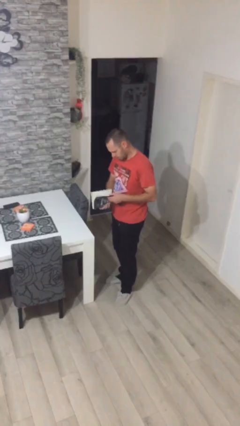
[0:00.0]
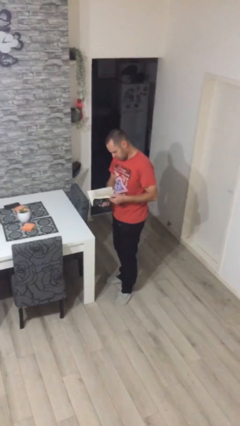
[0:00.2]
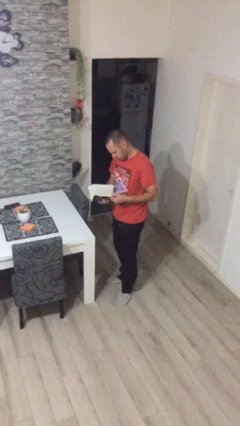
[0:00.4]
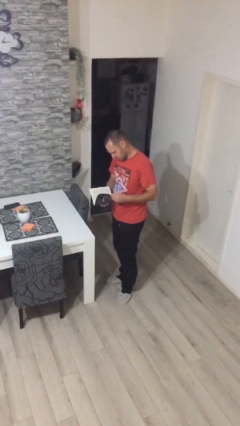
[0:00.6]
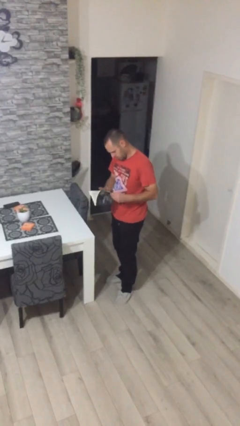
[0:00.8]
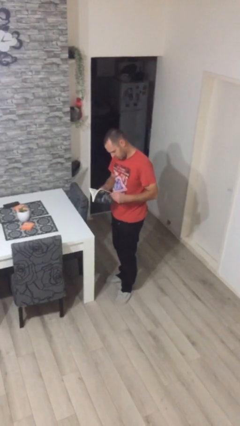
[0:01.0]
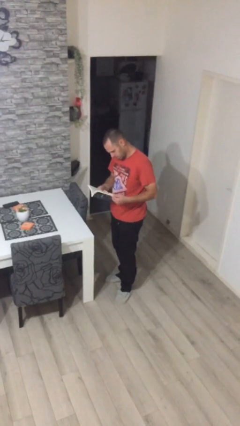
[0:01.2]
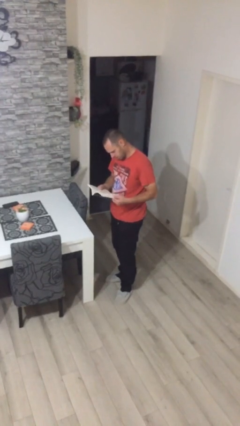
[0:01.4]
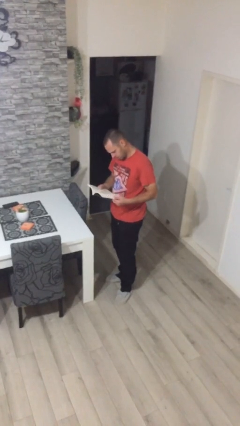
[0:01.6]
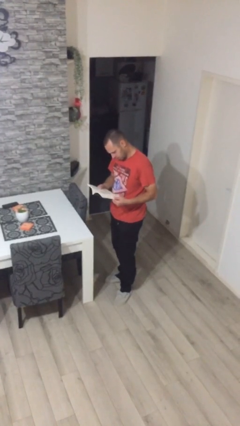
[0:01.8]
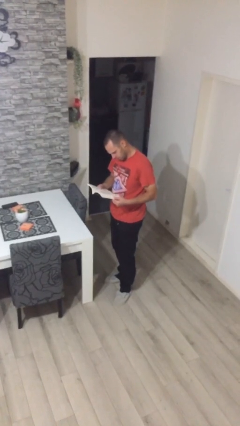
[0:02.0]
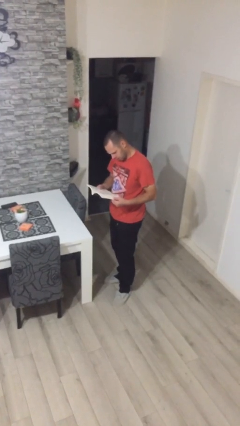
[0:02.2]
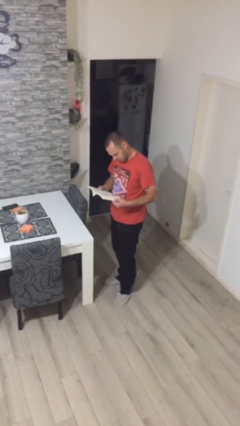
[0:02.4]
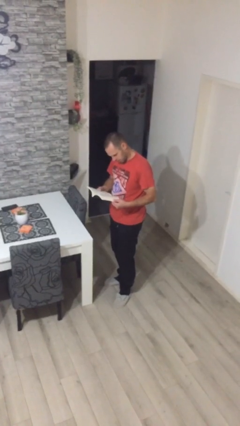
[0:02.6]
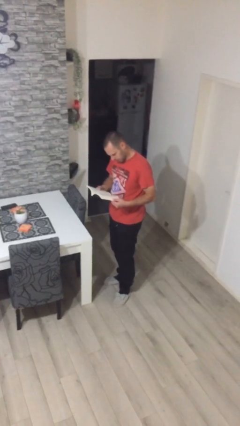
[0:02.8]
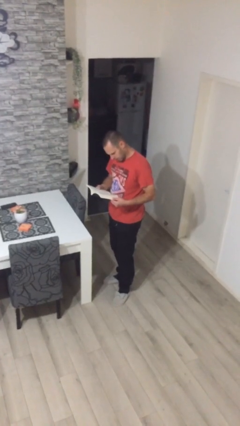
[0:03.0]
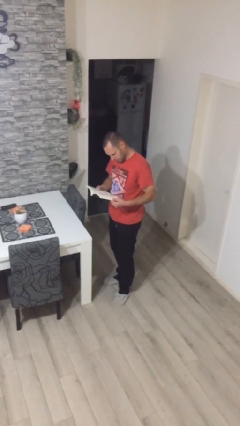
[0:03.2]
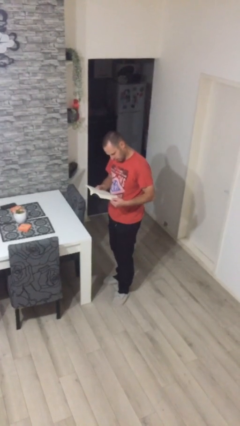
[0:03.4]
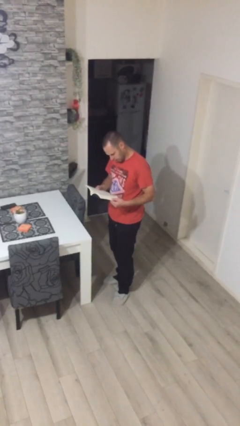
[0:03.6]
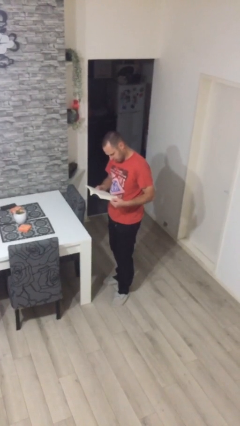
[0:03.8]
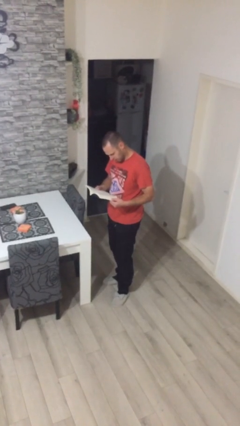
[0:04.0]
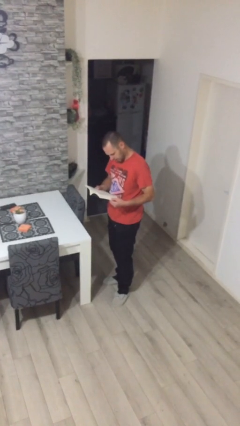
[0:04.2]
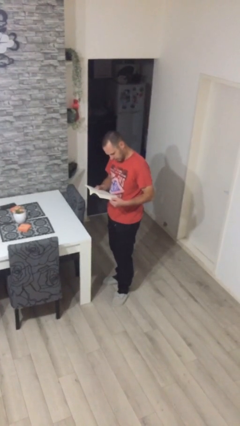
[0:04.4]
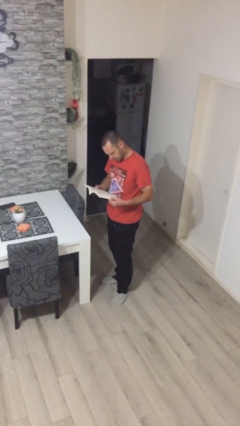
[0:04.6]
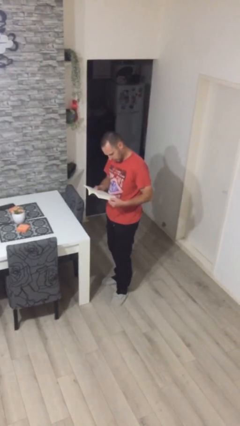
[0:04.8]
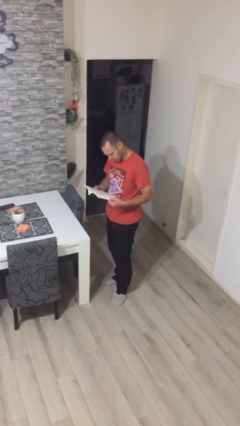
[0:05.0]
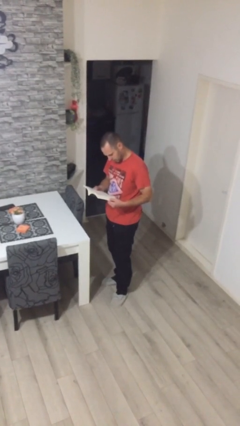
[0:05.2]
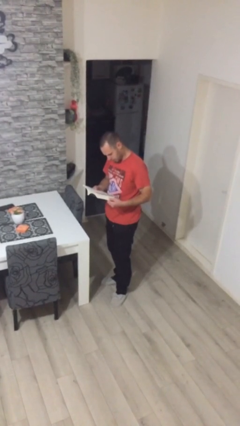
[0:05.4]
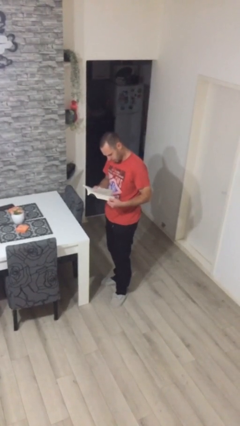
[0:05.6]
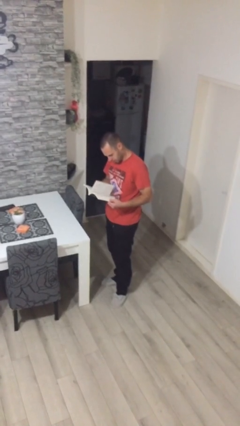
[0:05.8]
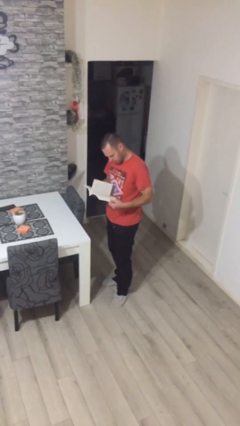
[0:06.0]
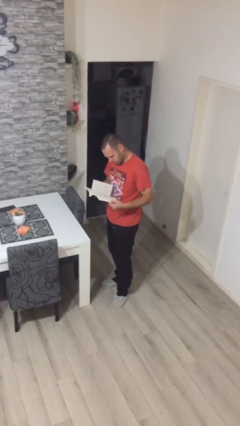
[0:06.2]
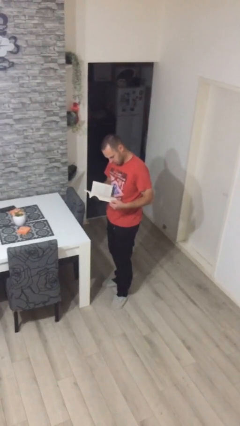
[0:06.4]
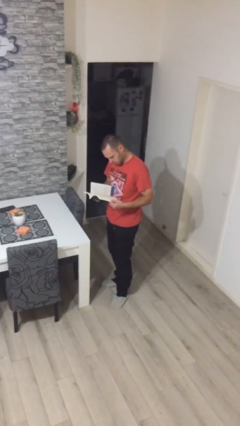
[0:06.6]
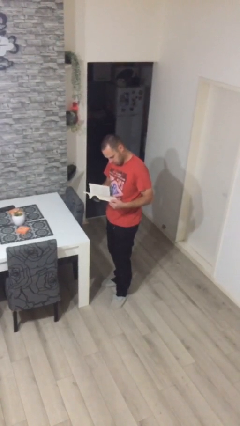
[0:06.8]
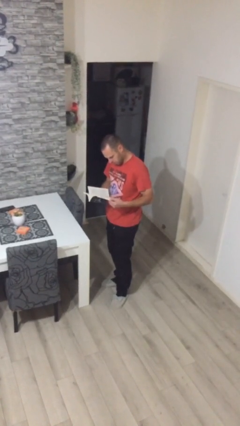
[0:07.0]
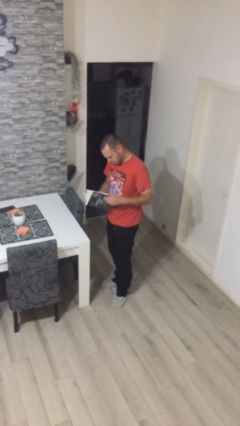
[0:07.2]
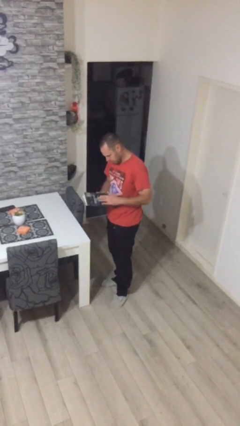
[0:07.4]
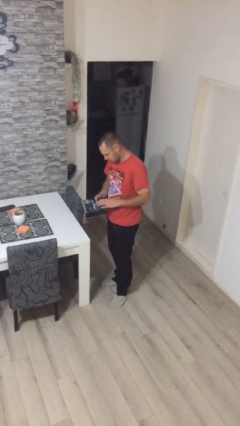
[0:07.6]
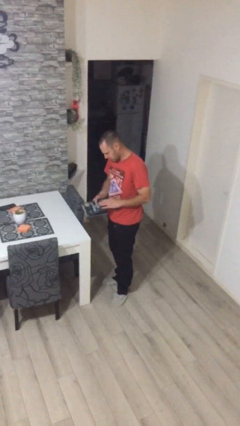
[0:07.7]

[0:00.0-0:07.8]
person reads document

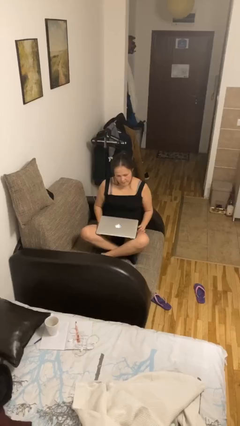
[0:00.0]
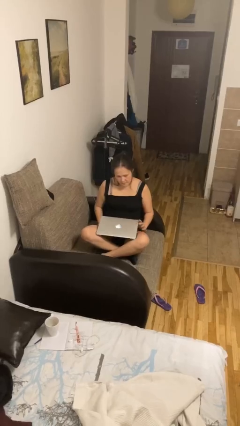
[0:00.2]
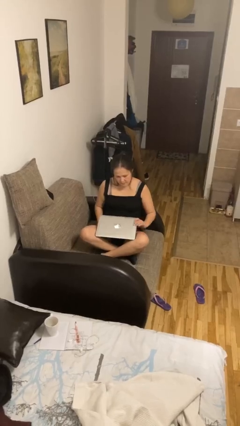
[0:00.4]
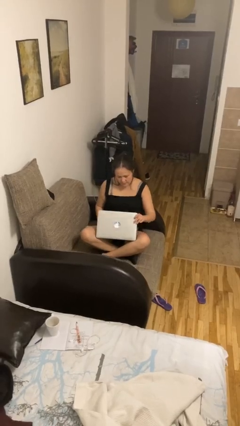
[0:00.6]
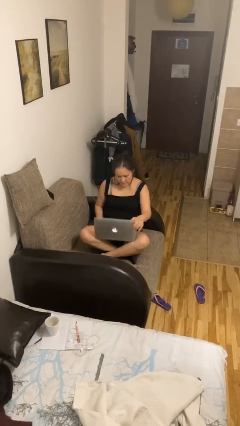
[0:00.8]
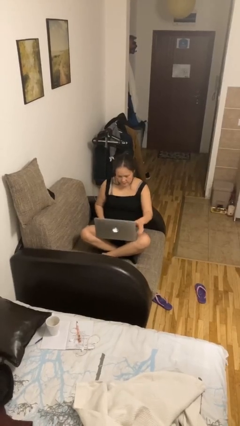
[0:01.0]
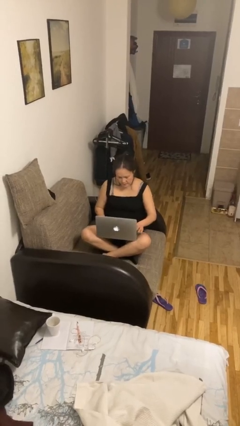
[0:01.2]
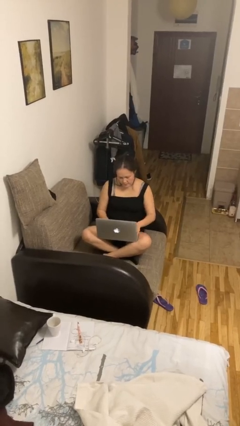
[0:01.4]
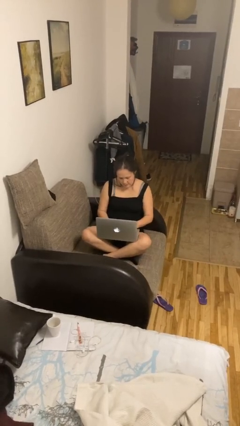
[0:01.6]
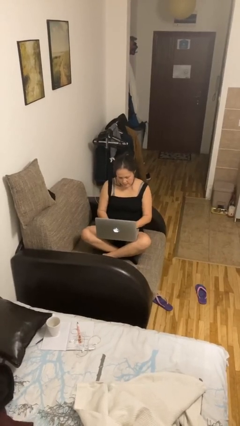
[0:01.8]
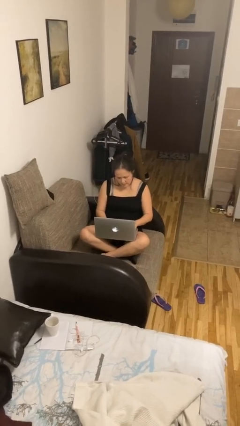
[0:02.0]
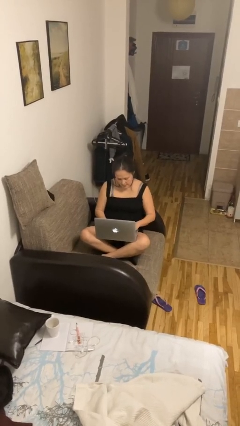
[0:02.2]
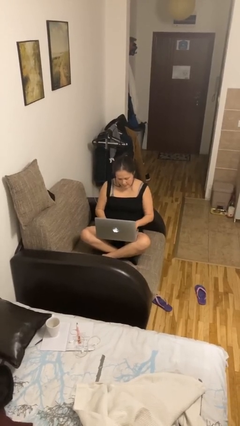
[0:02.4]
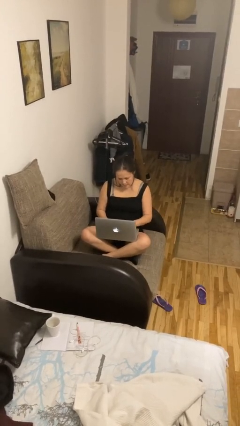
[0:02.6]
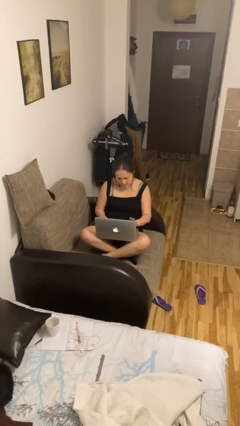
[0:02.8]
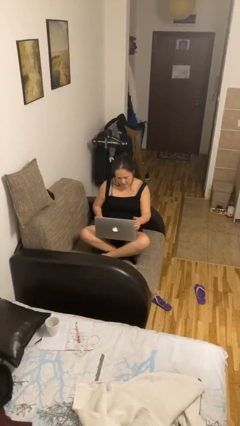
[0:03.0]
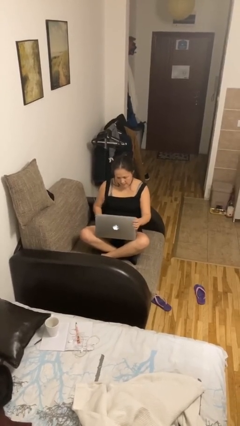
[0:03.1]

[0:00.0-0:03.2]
person interacts with laptop

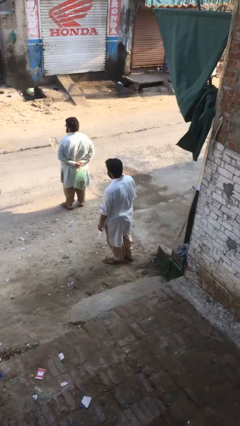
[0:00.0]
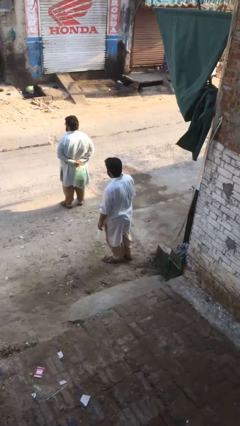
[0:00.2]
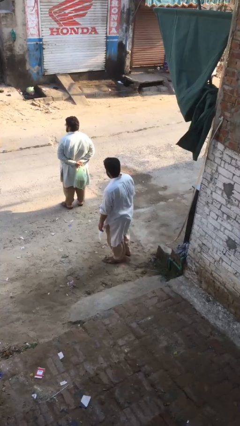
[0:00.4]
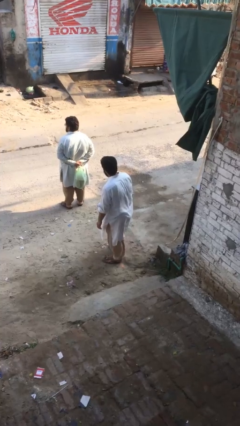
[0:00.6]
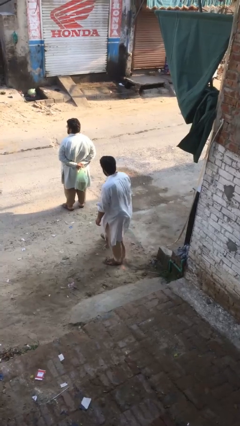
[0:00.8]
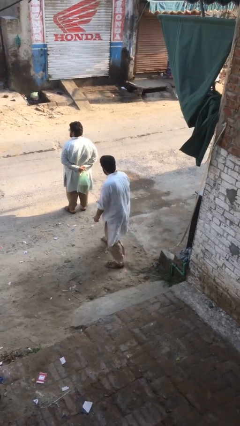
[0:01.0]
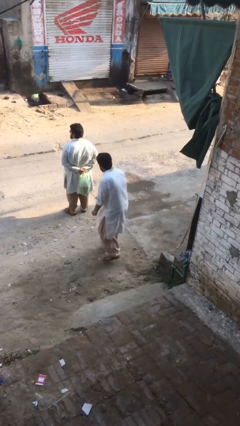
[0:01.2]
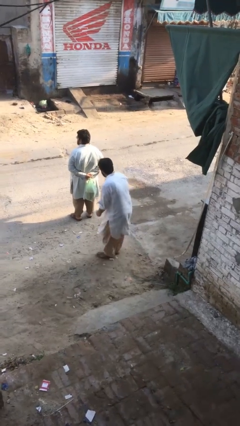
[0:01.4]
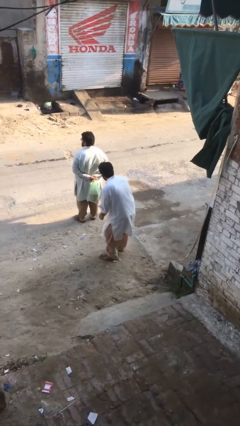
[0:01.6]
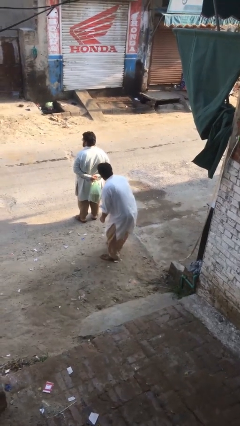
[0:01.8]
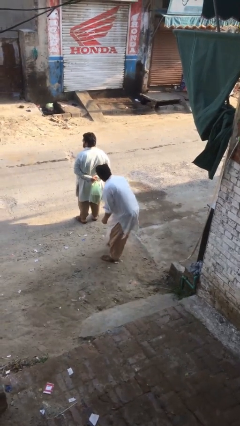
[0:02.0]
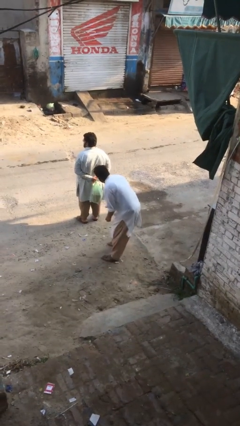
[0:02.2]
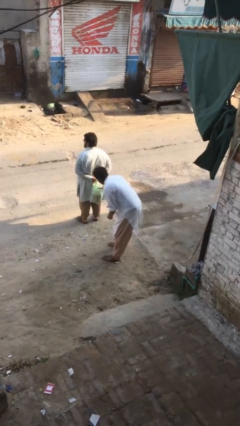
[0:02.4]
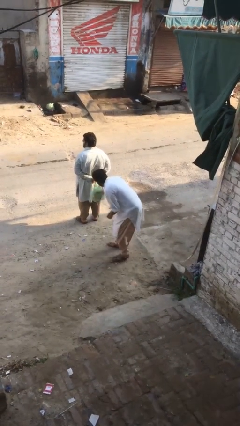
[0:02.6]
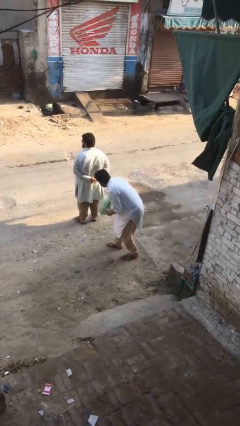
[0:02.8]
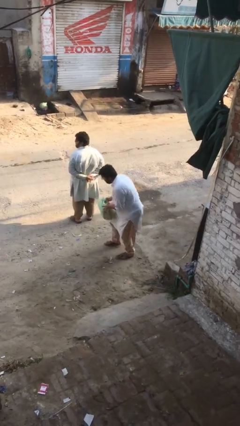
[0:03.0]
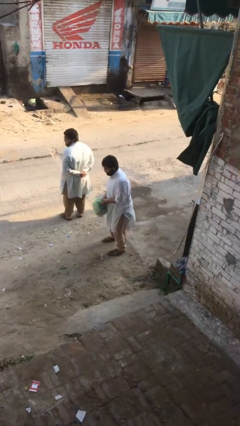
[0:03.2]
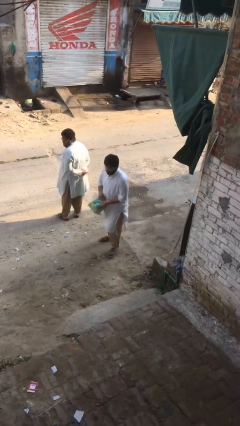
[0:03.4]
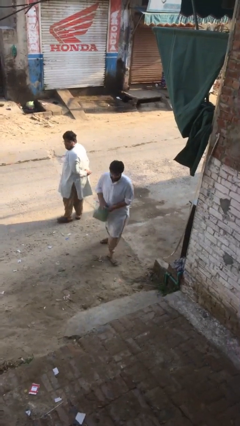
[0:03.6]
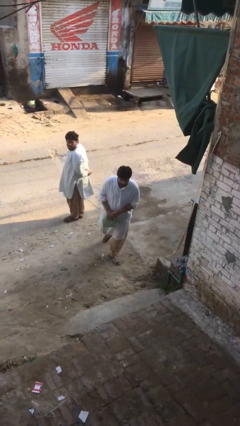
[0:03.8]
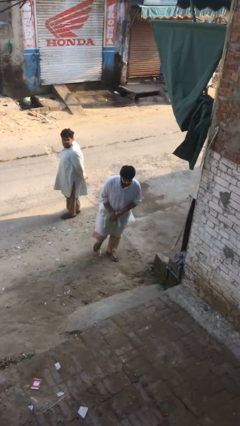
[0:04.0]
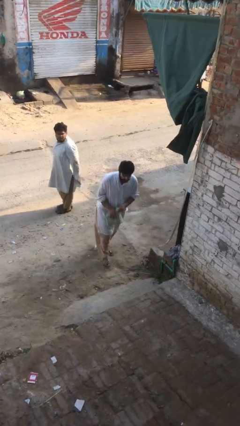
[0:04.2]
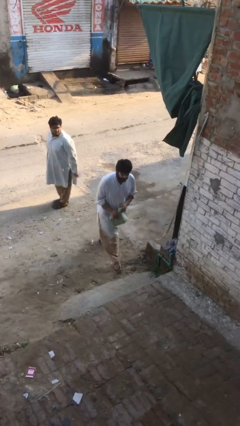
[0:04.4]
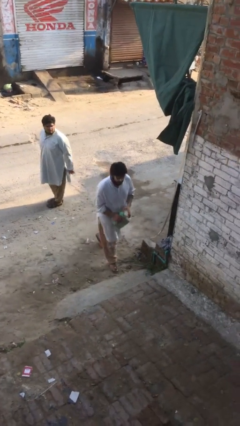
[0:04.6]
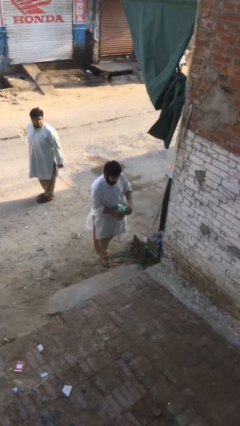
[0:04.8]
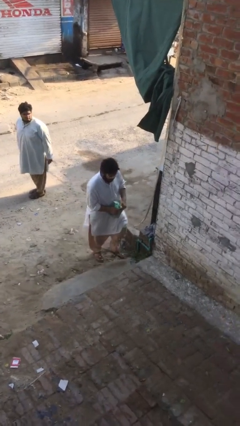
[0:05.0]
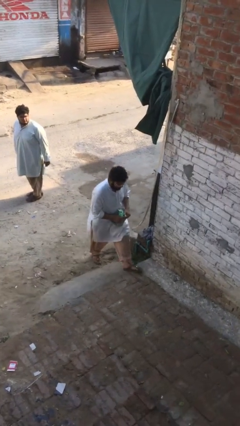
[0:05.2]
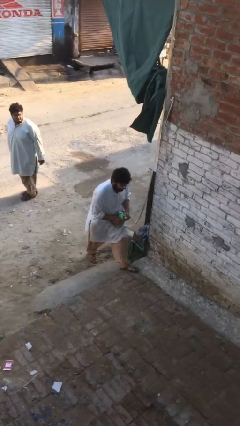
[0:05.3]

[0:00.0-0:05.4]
person steals object from person

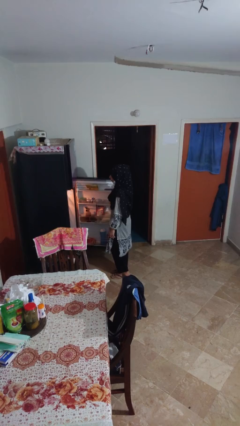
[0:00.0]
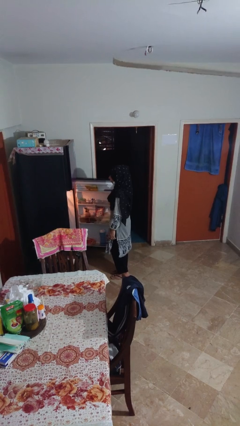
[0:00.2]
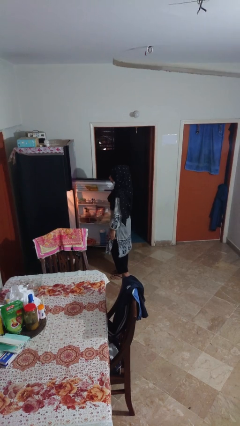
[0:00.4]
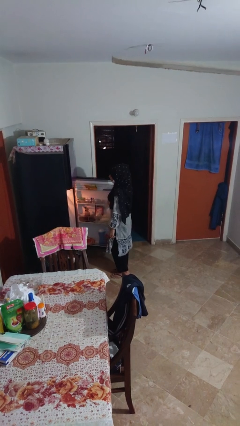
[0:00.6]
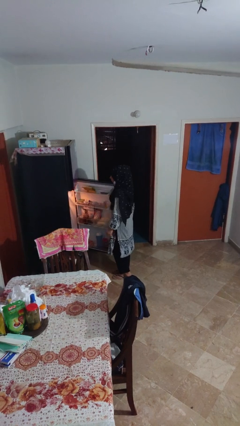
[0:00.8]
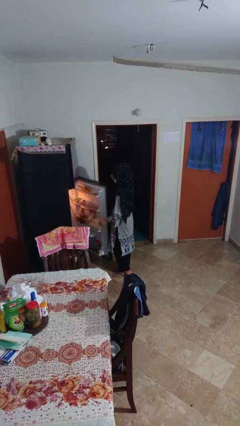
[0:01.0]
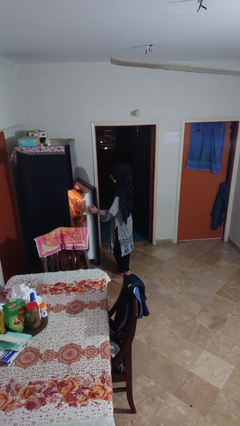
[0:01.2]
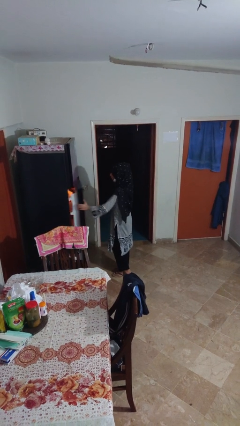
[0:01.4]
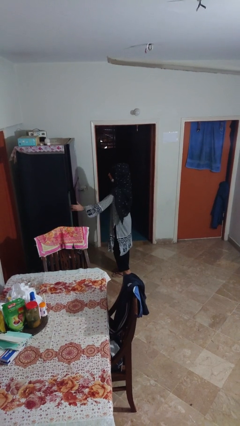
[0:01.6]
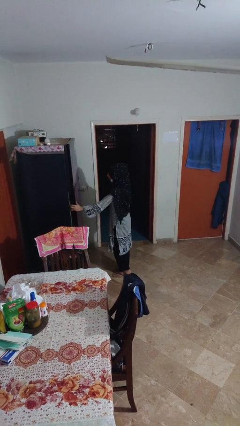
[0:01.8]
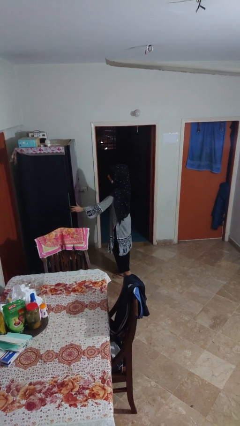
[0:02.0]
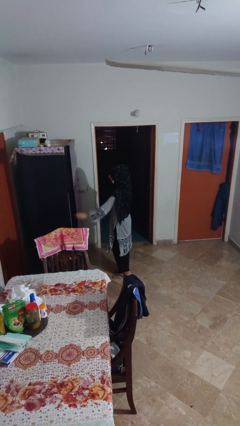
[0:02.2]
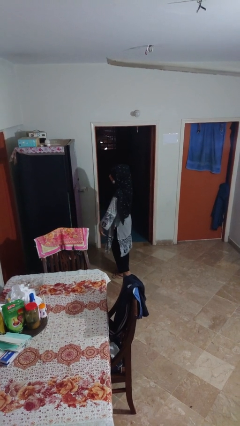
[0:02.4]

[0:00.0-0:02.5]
person closes refrigerator
